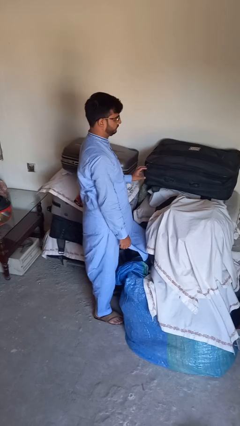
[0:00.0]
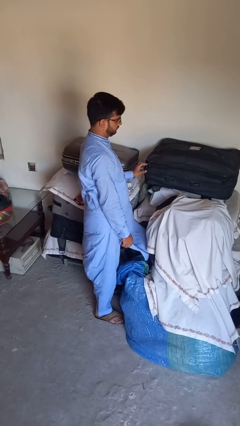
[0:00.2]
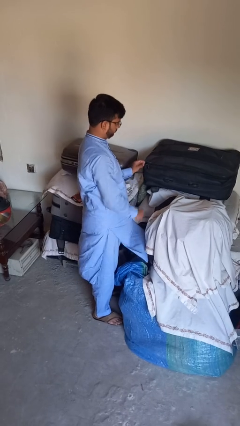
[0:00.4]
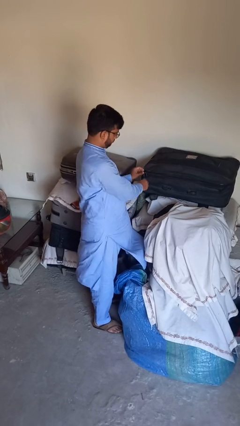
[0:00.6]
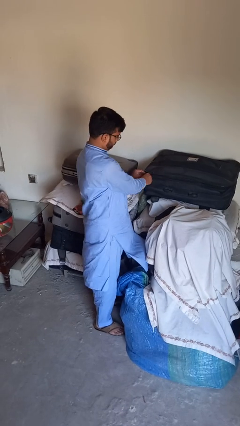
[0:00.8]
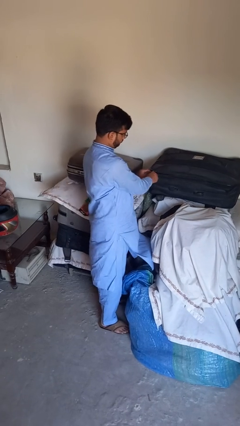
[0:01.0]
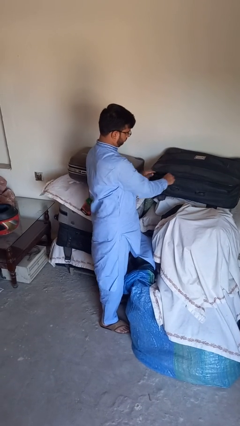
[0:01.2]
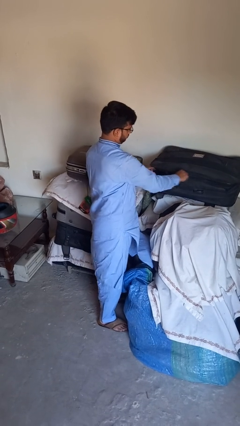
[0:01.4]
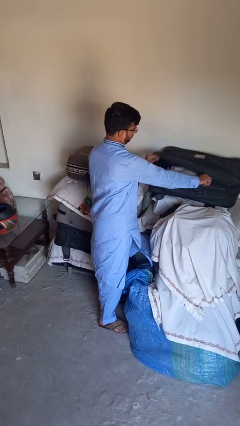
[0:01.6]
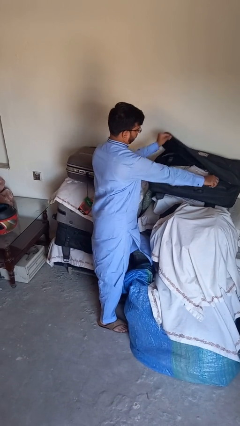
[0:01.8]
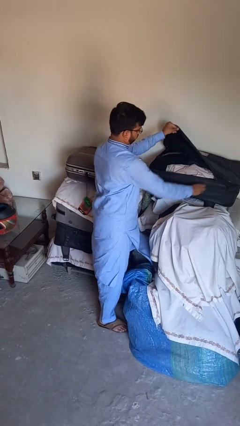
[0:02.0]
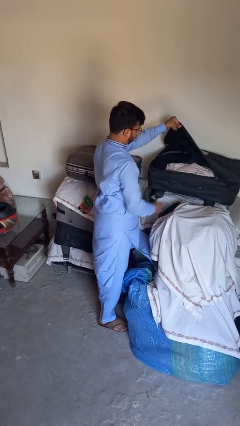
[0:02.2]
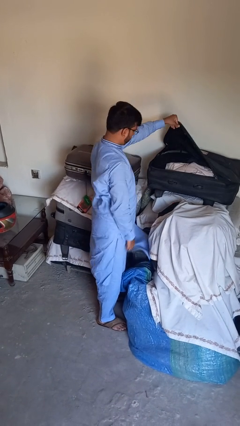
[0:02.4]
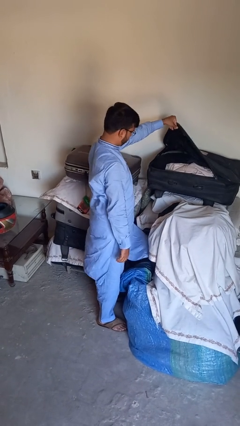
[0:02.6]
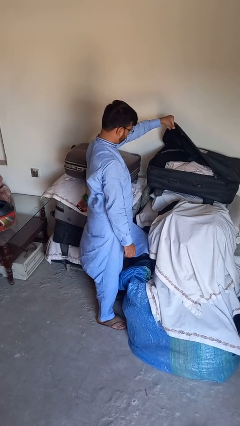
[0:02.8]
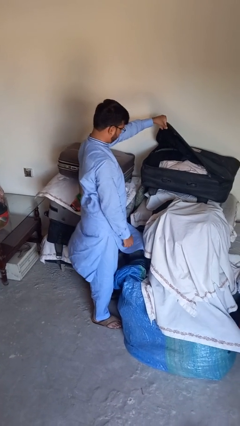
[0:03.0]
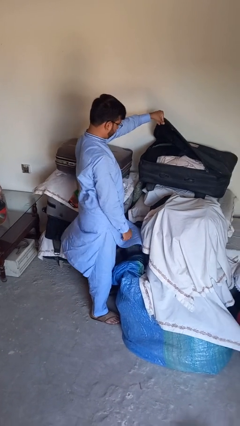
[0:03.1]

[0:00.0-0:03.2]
person opens suitcase

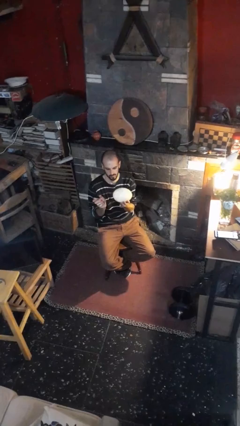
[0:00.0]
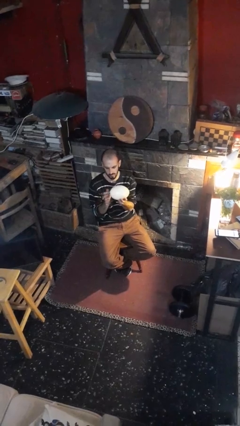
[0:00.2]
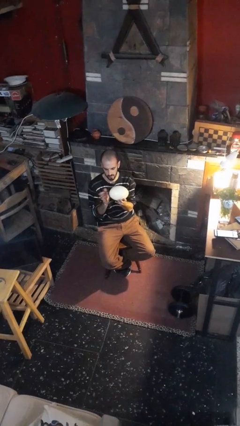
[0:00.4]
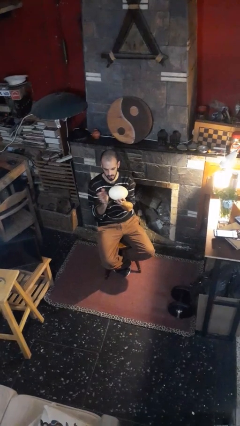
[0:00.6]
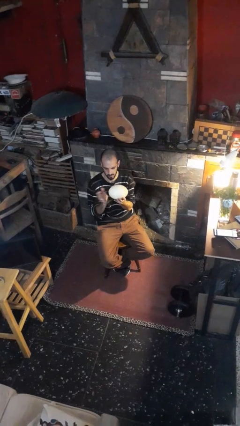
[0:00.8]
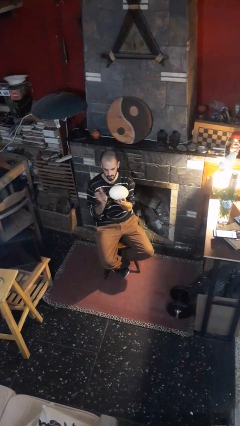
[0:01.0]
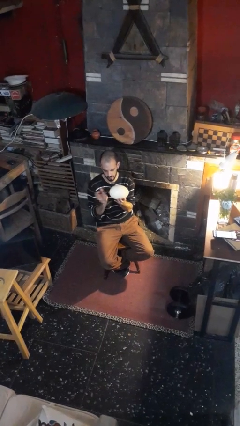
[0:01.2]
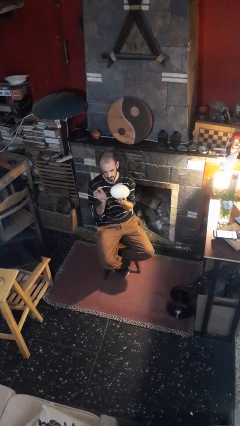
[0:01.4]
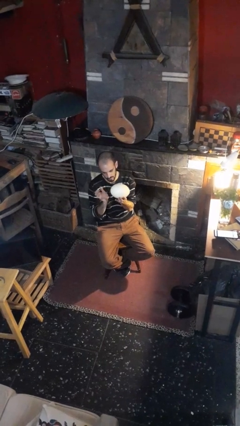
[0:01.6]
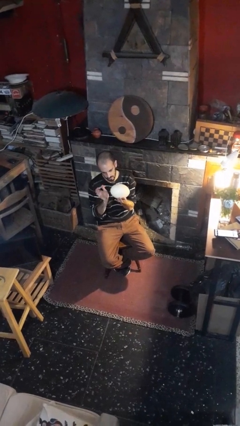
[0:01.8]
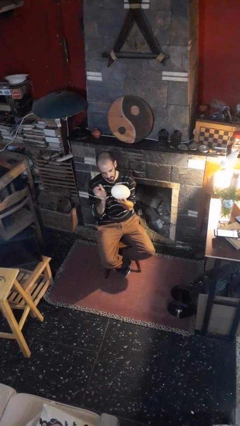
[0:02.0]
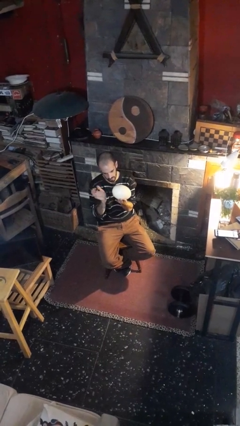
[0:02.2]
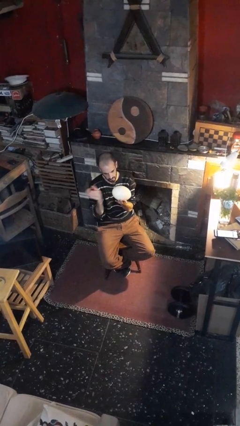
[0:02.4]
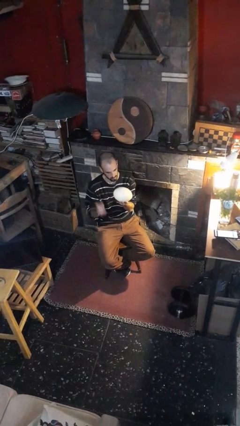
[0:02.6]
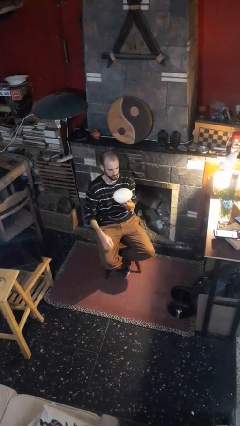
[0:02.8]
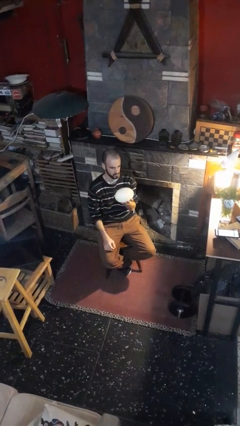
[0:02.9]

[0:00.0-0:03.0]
person taps object with finger

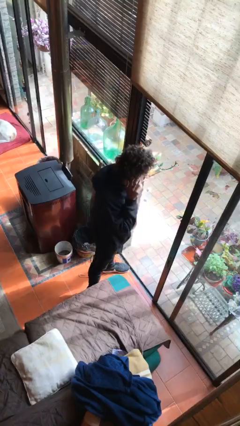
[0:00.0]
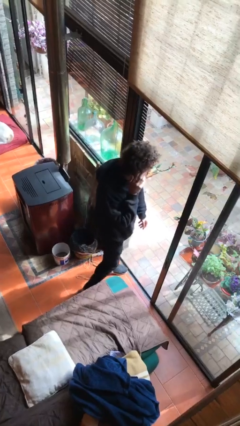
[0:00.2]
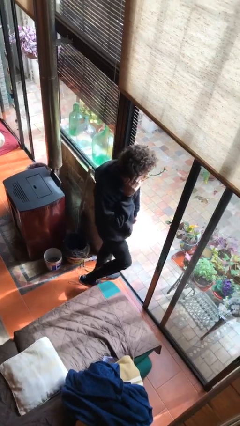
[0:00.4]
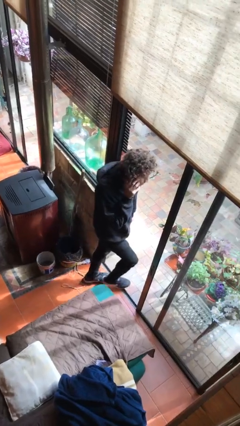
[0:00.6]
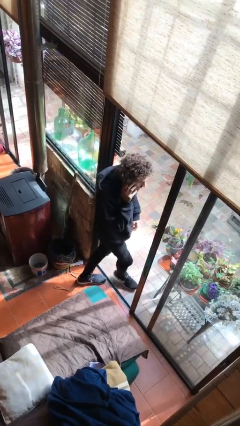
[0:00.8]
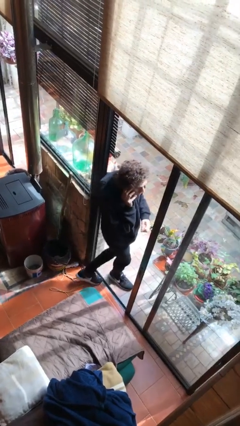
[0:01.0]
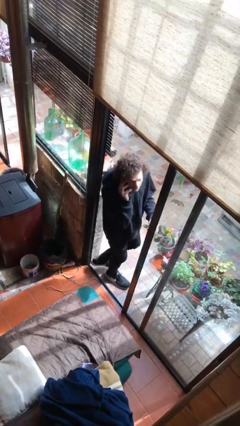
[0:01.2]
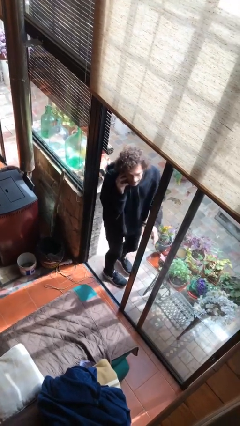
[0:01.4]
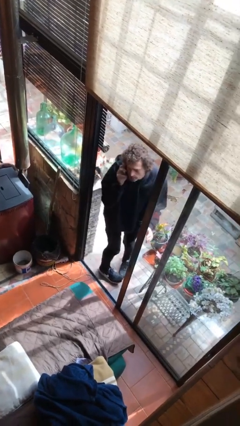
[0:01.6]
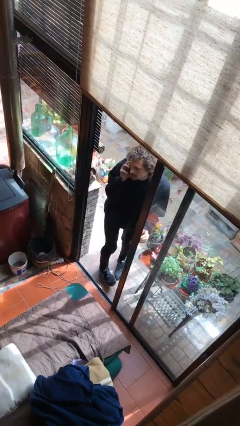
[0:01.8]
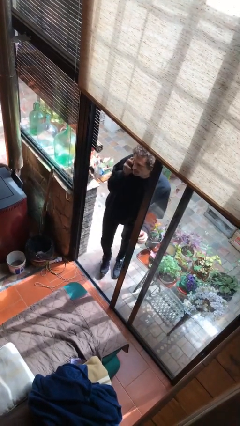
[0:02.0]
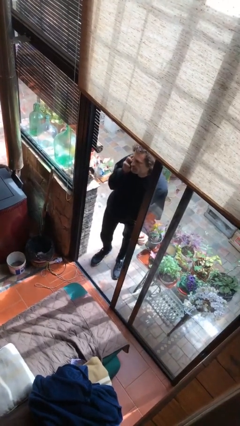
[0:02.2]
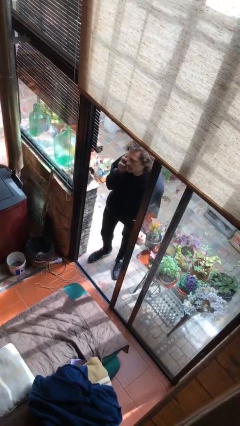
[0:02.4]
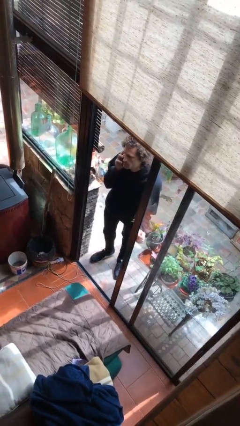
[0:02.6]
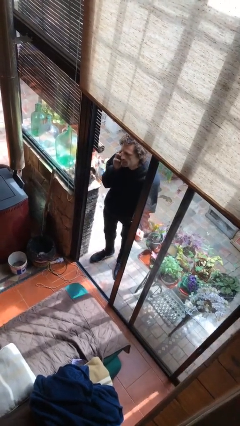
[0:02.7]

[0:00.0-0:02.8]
person exits scene through structure

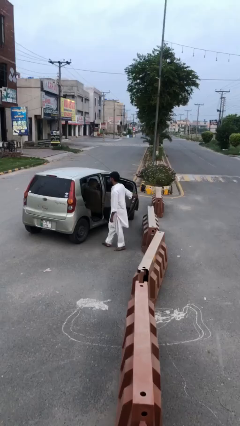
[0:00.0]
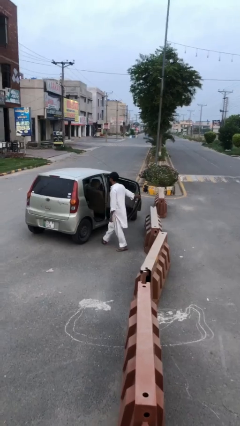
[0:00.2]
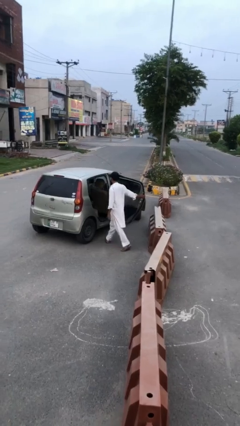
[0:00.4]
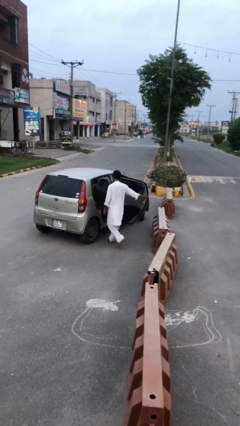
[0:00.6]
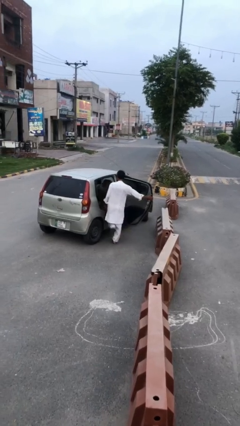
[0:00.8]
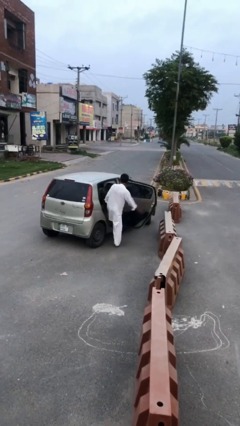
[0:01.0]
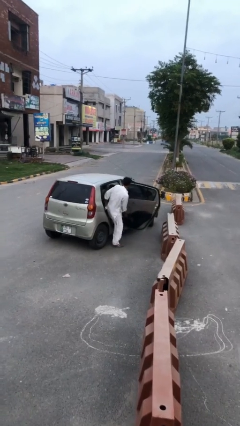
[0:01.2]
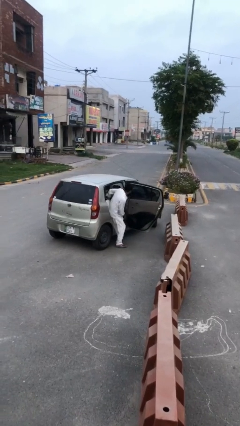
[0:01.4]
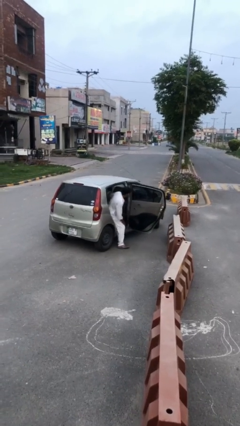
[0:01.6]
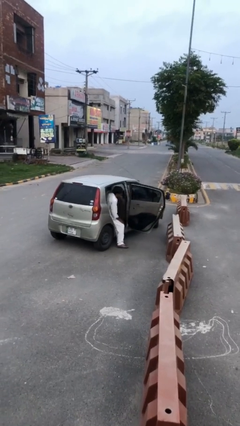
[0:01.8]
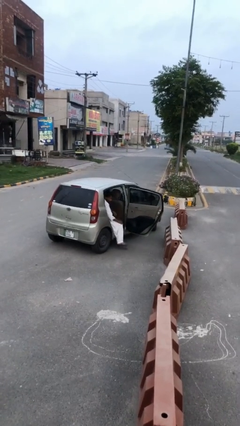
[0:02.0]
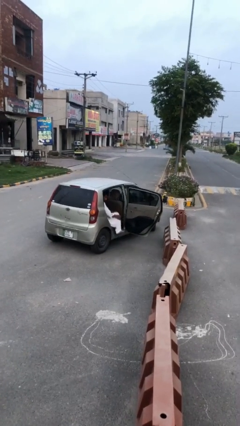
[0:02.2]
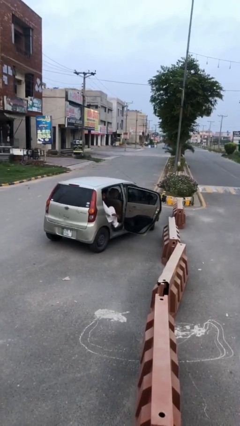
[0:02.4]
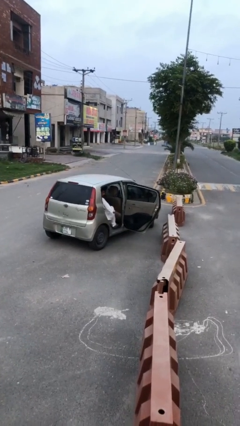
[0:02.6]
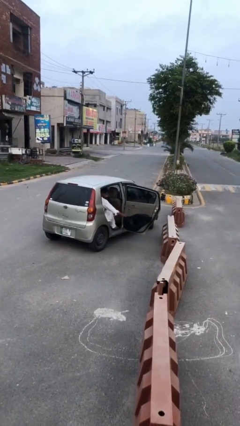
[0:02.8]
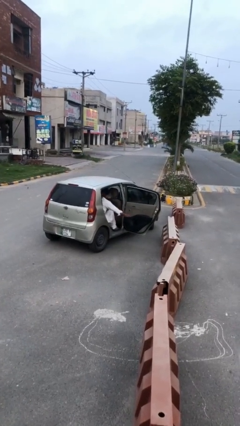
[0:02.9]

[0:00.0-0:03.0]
person enters car

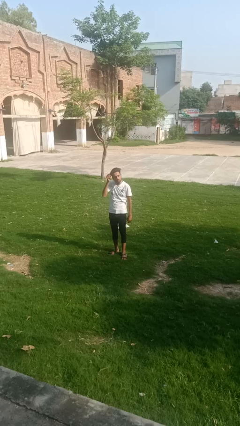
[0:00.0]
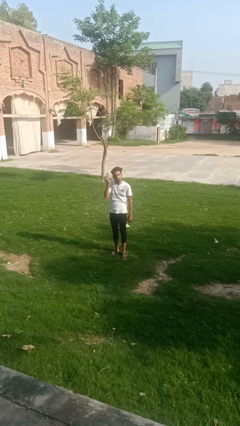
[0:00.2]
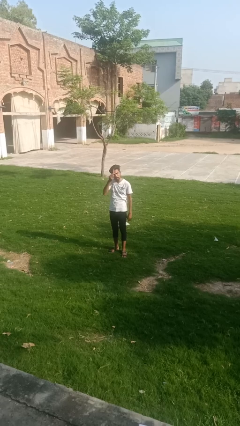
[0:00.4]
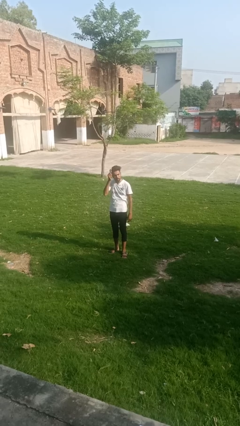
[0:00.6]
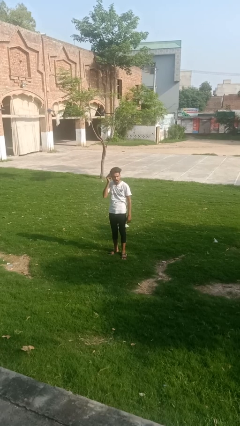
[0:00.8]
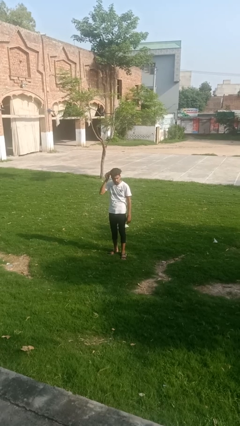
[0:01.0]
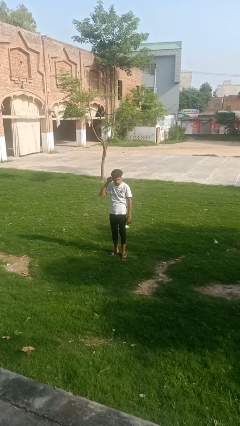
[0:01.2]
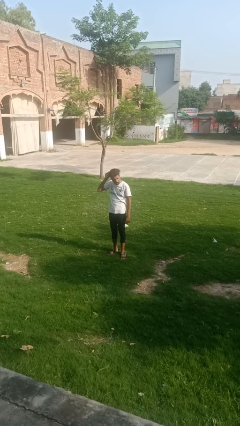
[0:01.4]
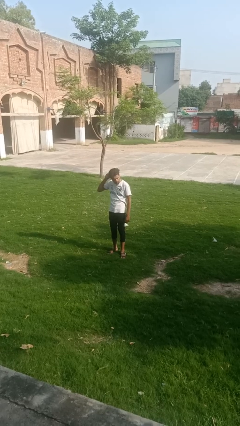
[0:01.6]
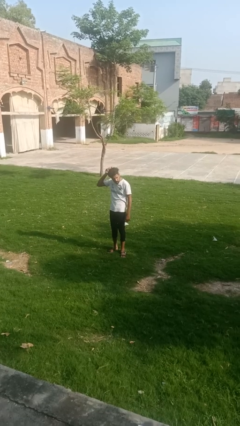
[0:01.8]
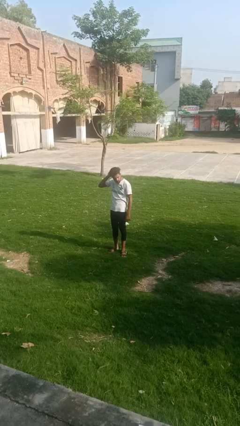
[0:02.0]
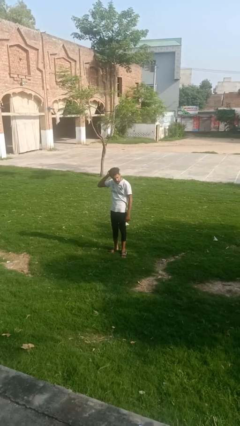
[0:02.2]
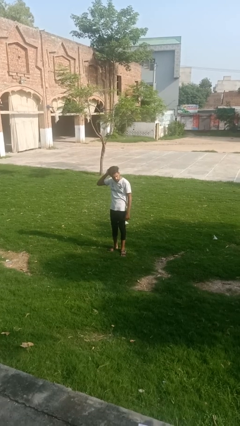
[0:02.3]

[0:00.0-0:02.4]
person brushes hair

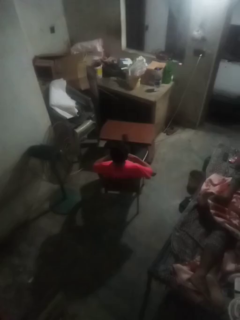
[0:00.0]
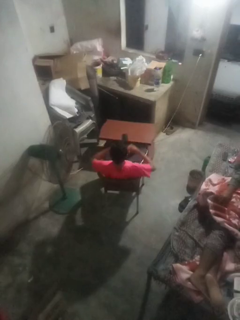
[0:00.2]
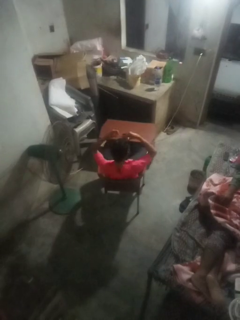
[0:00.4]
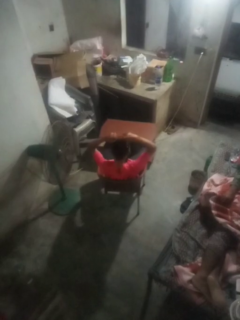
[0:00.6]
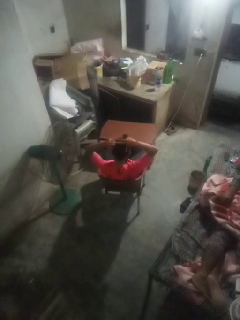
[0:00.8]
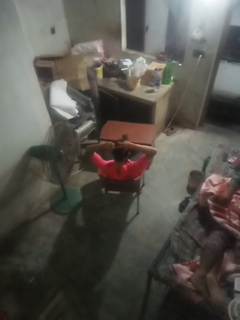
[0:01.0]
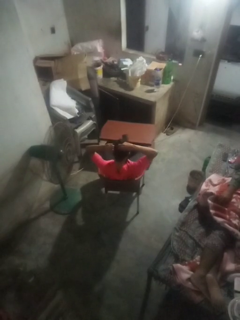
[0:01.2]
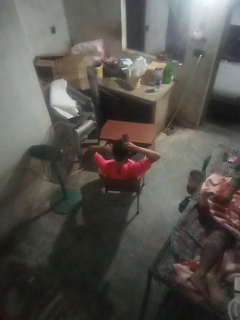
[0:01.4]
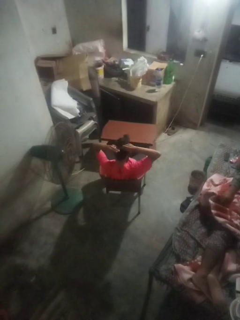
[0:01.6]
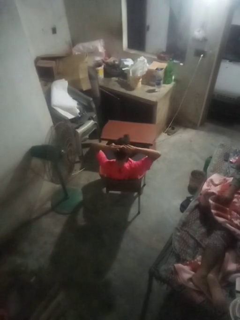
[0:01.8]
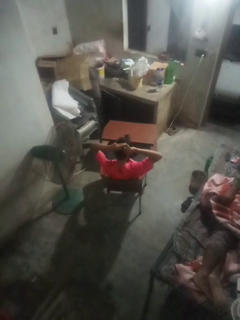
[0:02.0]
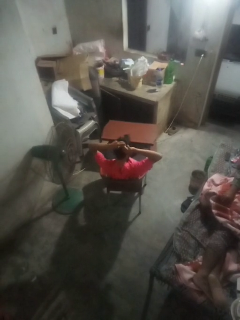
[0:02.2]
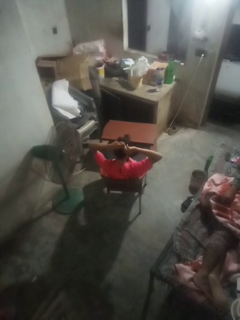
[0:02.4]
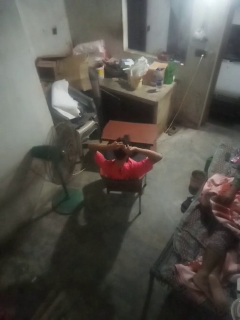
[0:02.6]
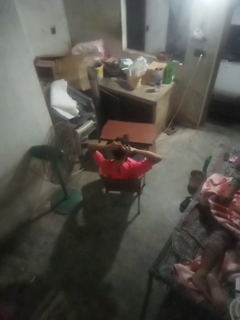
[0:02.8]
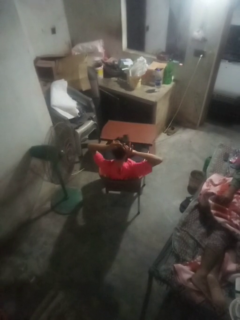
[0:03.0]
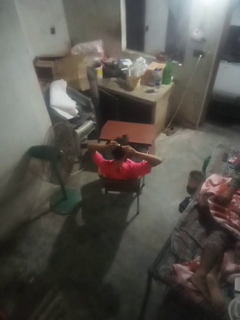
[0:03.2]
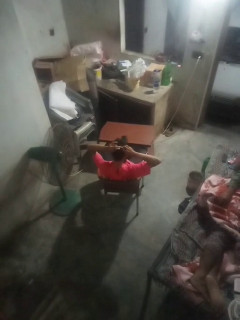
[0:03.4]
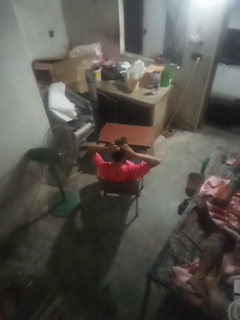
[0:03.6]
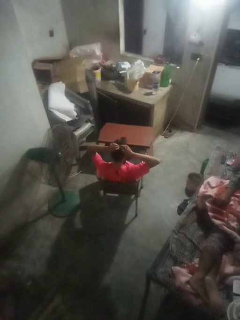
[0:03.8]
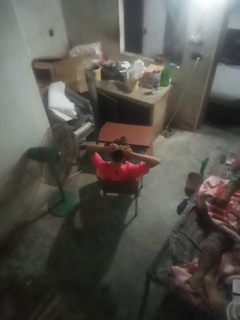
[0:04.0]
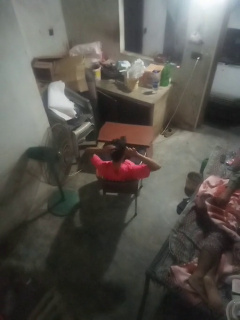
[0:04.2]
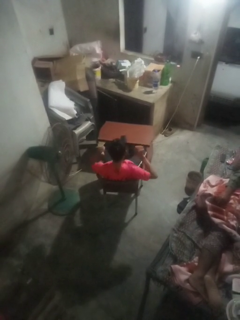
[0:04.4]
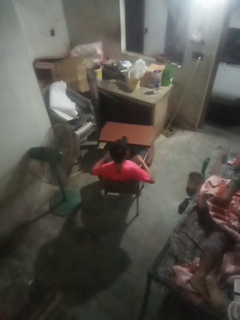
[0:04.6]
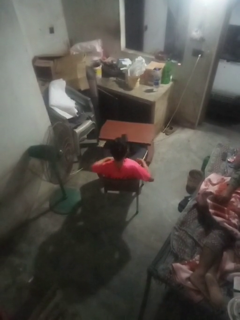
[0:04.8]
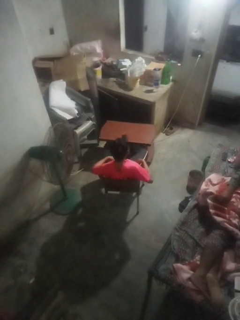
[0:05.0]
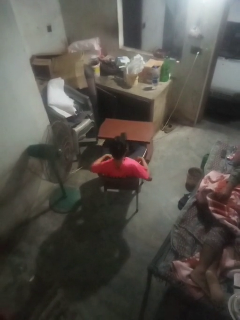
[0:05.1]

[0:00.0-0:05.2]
person puts hair in ponytail
